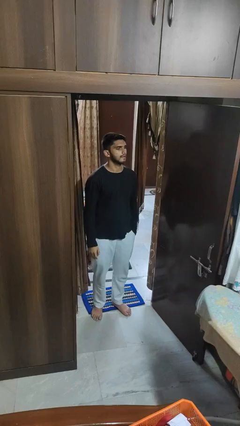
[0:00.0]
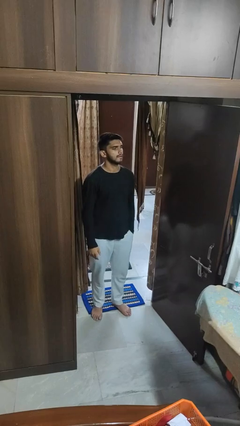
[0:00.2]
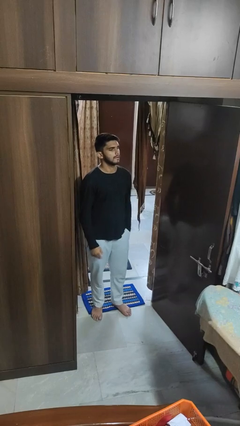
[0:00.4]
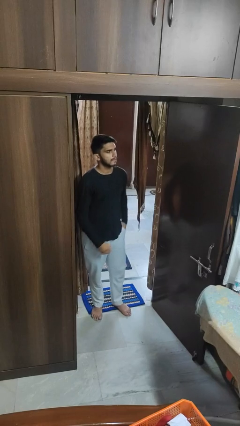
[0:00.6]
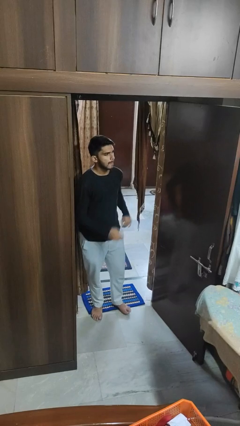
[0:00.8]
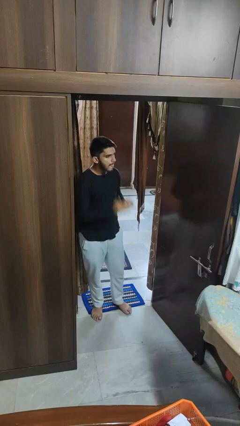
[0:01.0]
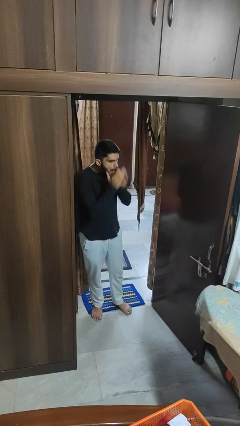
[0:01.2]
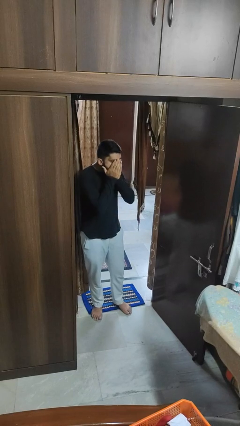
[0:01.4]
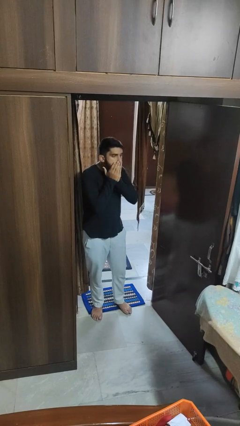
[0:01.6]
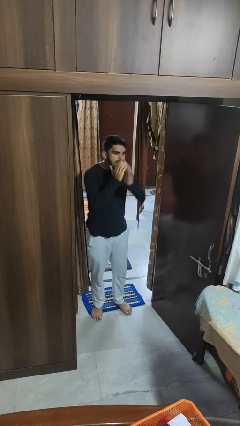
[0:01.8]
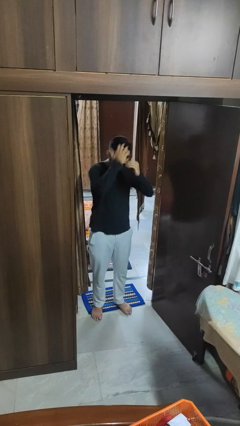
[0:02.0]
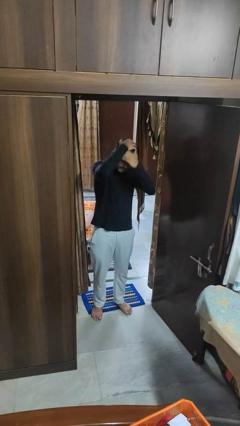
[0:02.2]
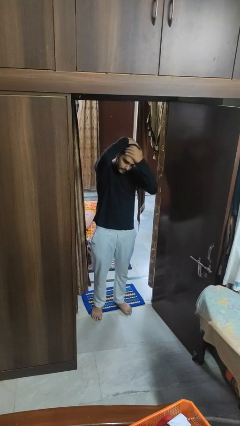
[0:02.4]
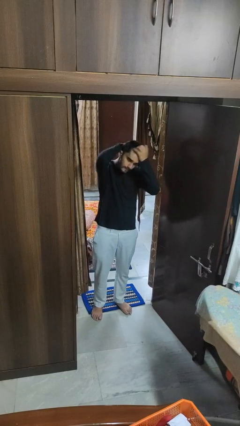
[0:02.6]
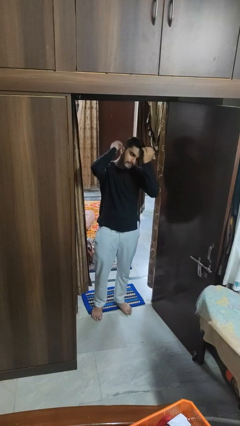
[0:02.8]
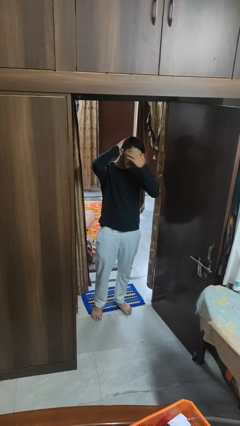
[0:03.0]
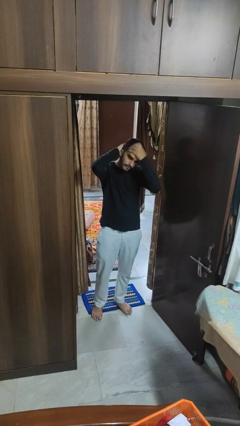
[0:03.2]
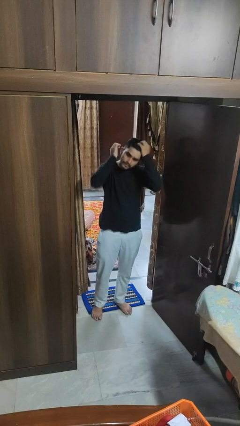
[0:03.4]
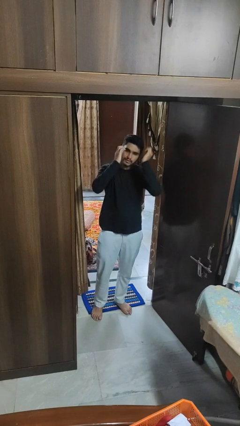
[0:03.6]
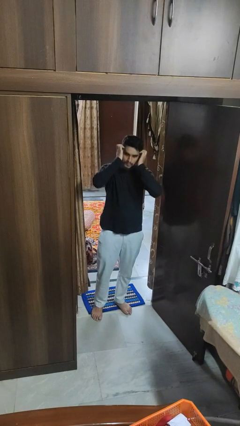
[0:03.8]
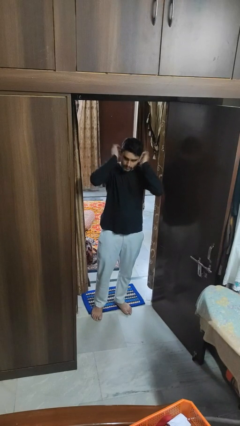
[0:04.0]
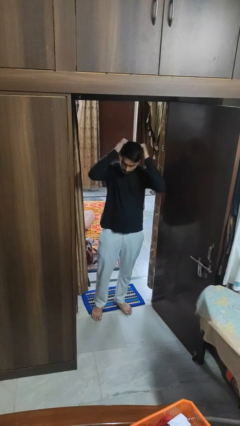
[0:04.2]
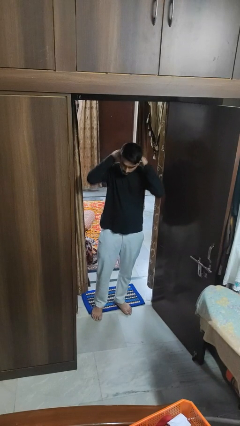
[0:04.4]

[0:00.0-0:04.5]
person strokes hair

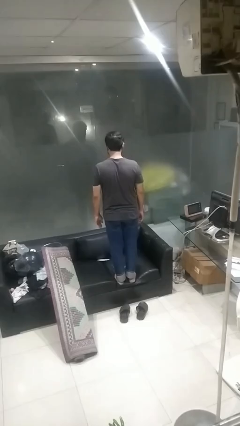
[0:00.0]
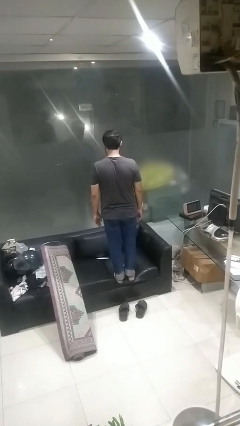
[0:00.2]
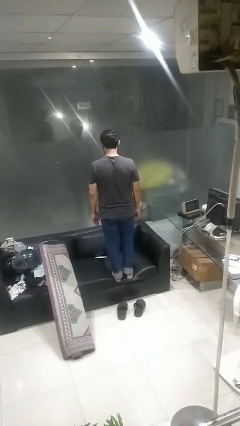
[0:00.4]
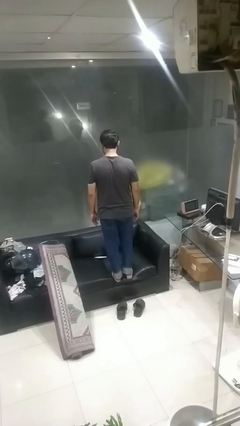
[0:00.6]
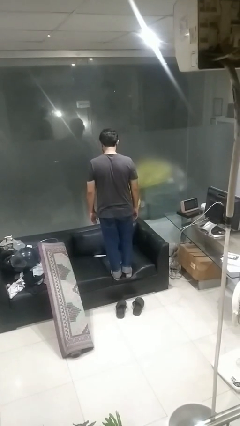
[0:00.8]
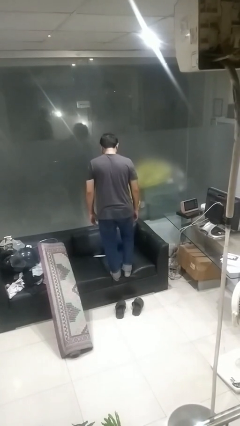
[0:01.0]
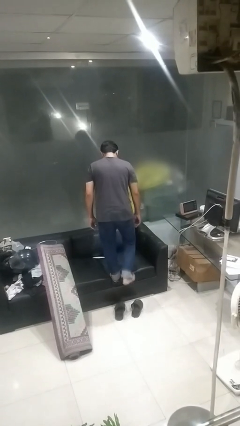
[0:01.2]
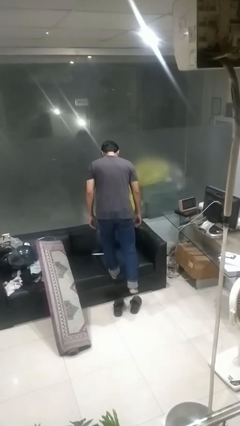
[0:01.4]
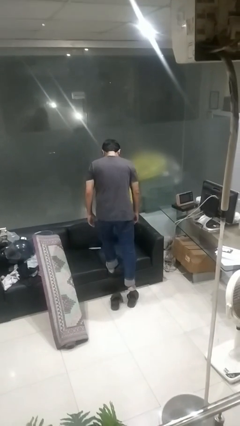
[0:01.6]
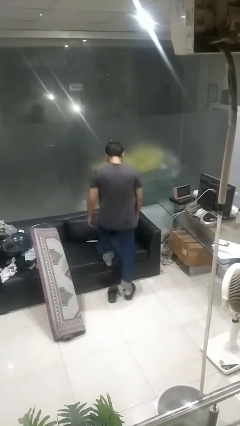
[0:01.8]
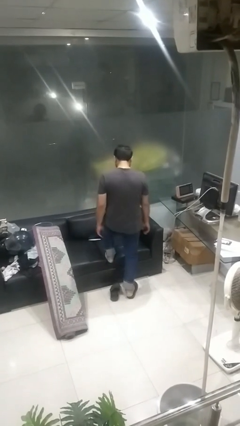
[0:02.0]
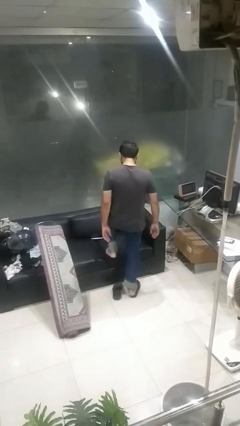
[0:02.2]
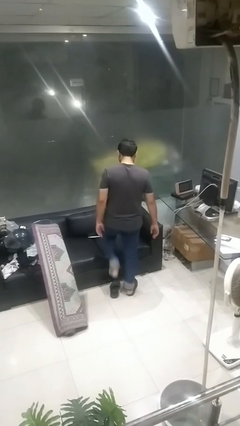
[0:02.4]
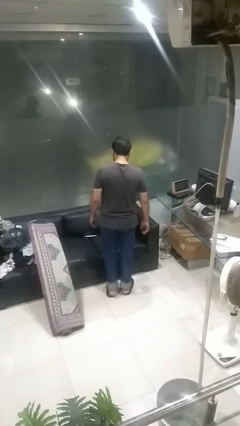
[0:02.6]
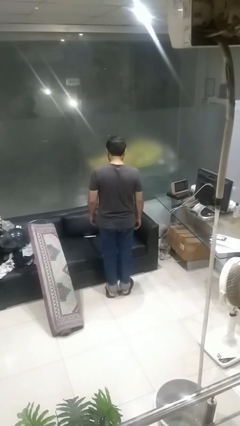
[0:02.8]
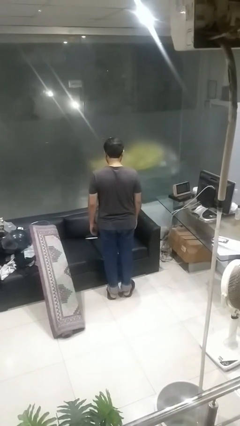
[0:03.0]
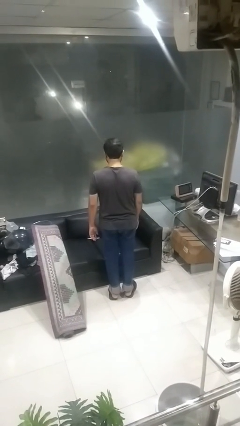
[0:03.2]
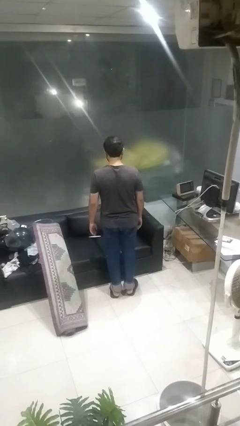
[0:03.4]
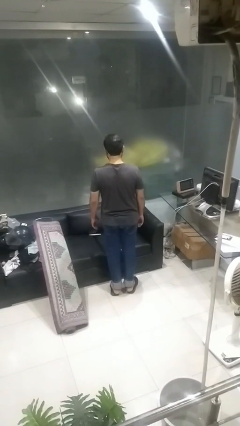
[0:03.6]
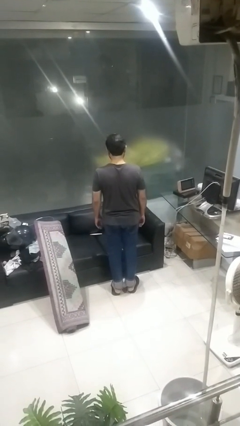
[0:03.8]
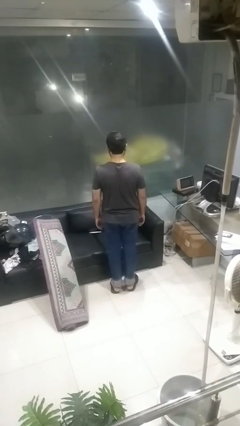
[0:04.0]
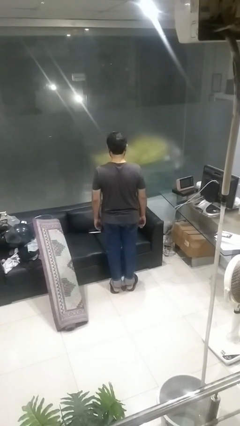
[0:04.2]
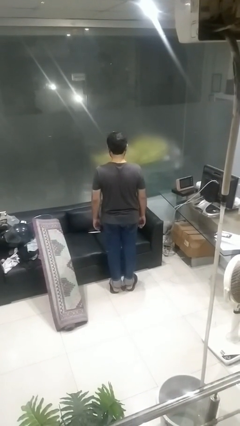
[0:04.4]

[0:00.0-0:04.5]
person climbs off couch

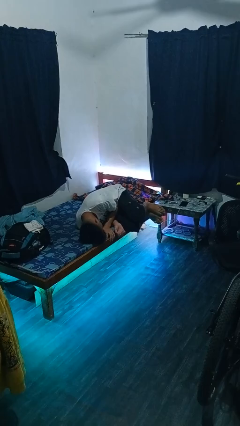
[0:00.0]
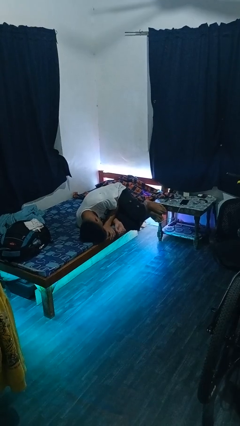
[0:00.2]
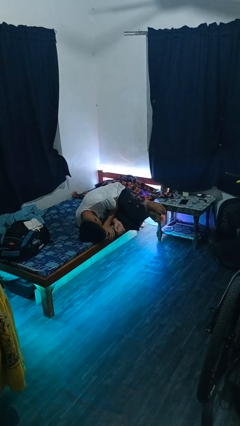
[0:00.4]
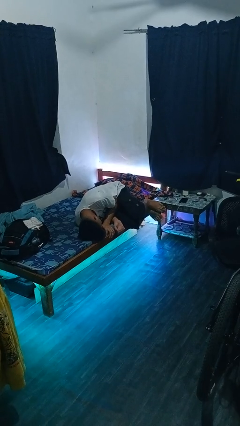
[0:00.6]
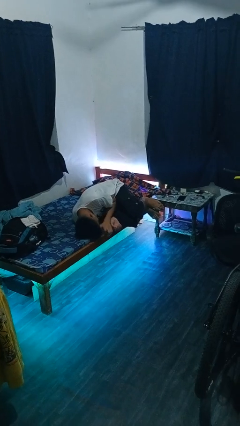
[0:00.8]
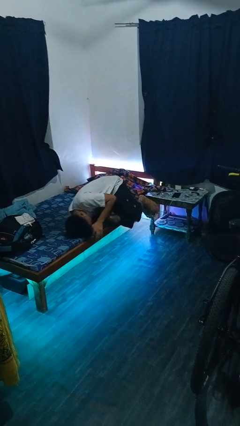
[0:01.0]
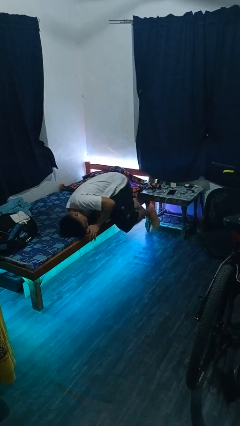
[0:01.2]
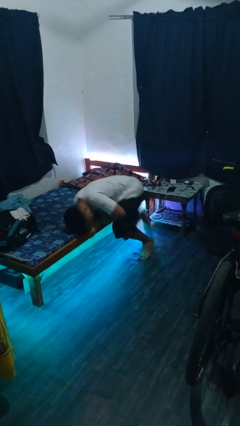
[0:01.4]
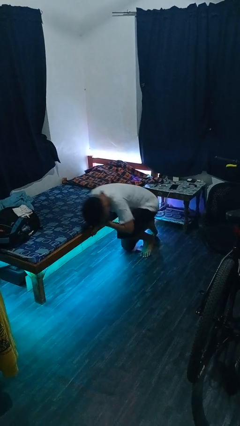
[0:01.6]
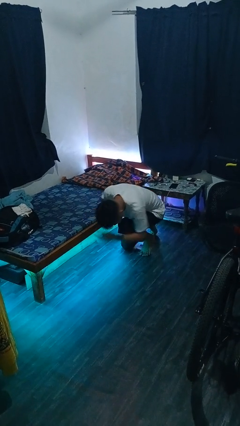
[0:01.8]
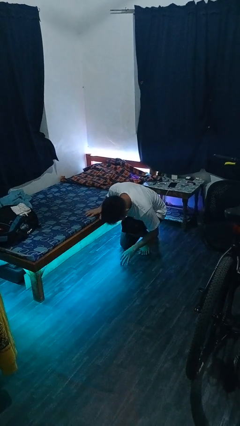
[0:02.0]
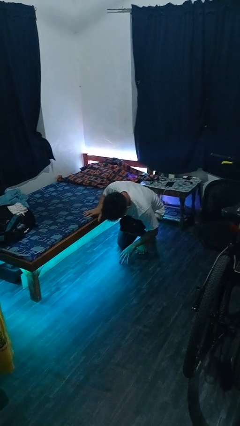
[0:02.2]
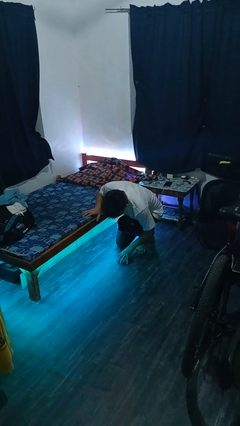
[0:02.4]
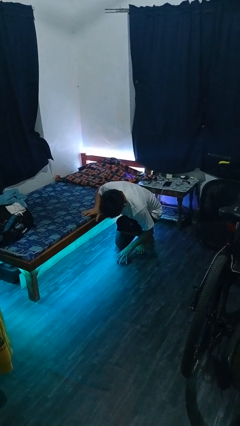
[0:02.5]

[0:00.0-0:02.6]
person falls from bed

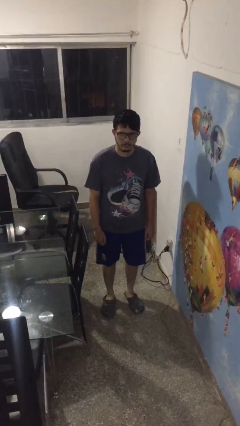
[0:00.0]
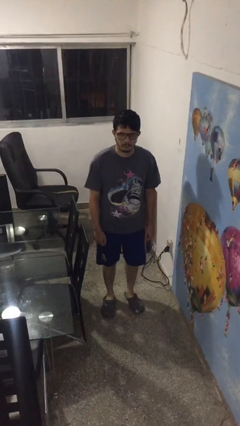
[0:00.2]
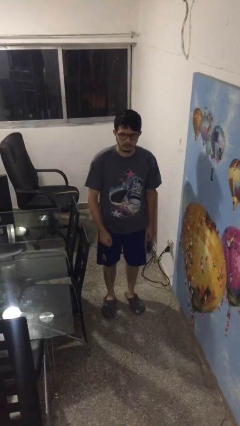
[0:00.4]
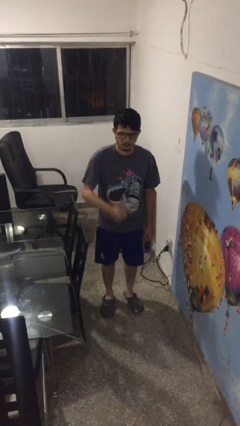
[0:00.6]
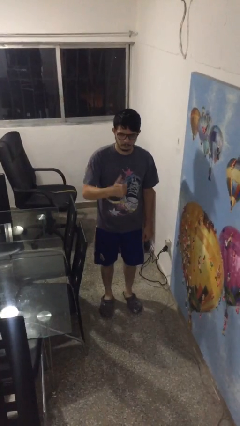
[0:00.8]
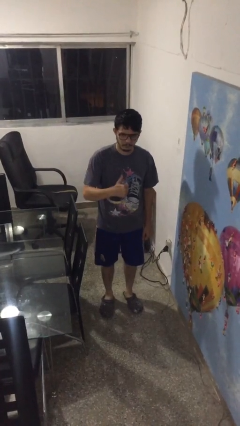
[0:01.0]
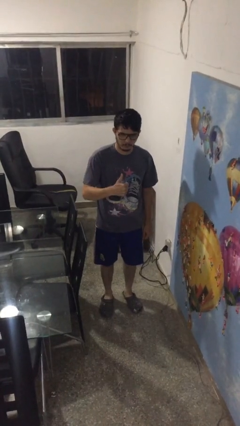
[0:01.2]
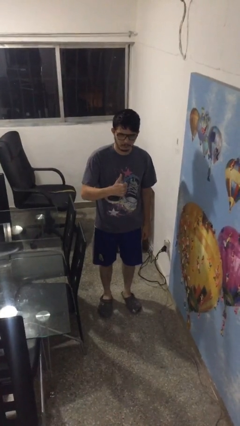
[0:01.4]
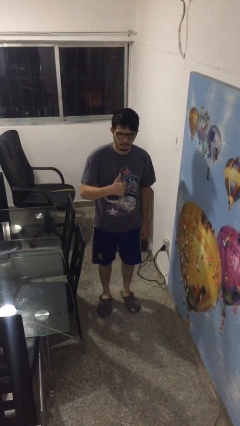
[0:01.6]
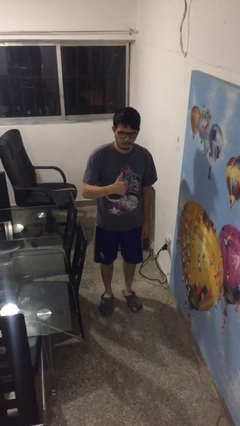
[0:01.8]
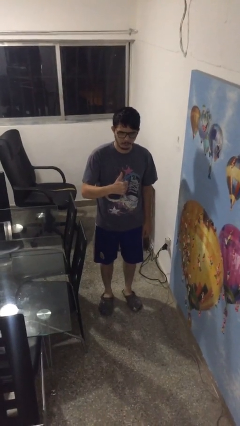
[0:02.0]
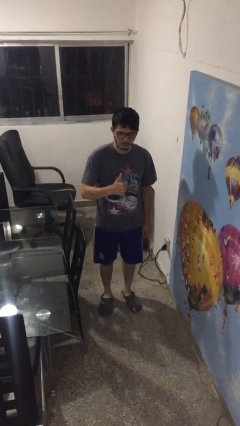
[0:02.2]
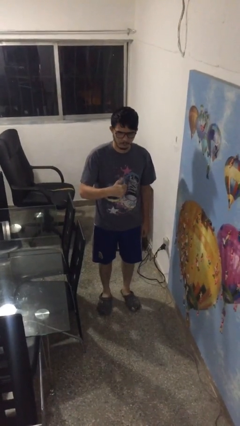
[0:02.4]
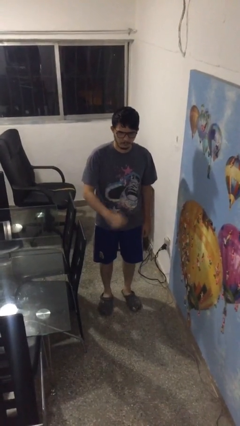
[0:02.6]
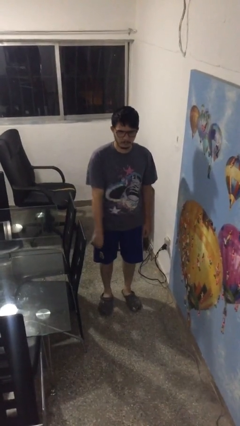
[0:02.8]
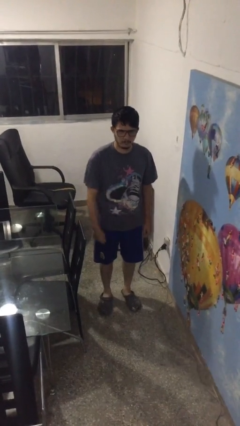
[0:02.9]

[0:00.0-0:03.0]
person gestures thumbs up

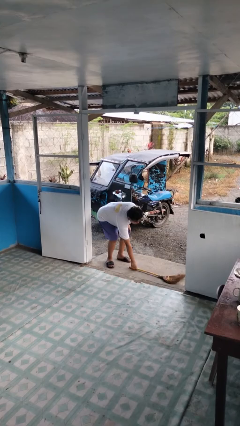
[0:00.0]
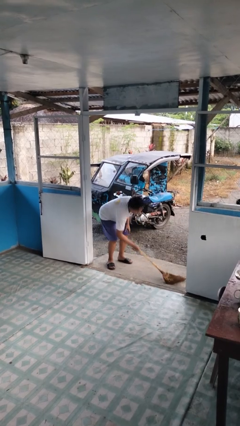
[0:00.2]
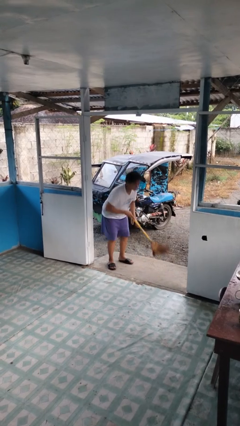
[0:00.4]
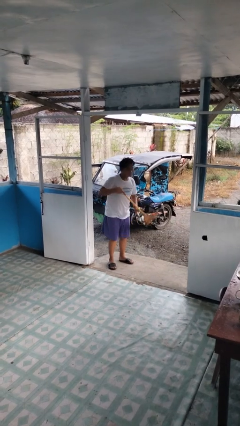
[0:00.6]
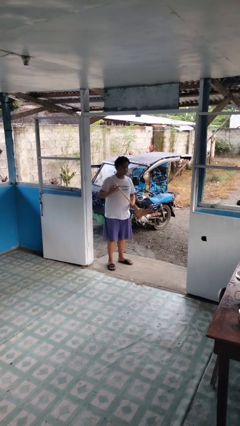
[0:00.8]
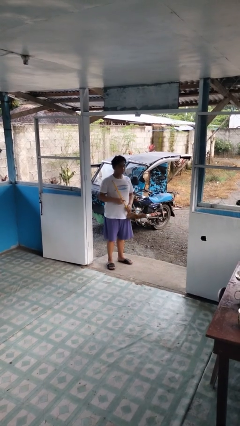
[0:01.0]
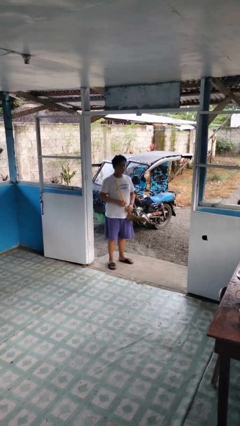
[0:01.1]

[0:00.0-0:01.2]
person picks up object from floor

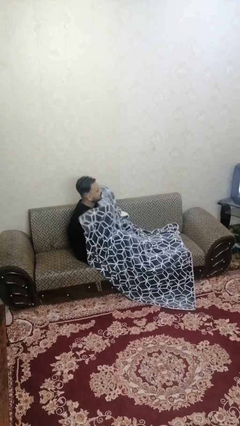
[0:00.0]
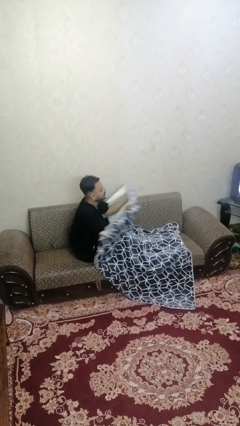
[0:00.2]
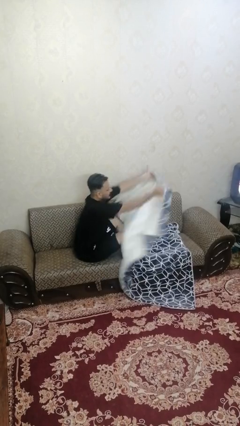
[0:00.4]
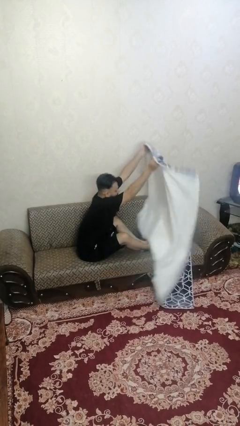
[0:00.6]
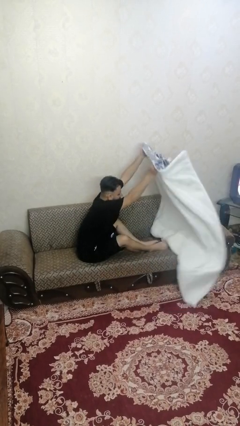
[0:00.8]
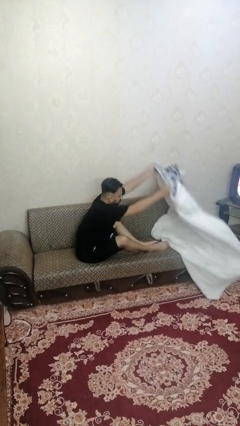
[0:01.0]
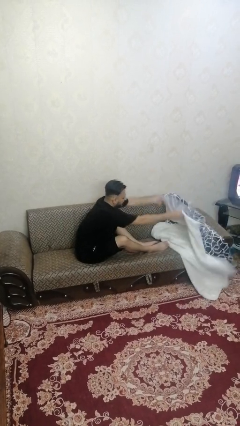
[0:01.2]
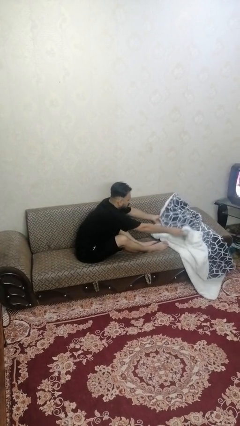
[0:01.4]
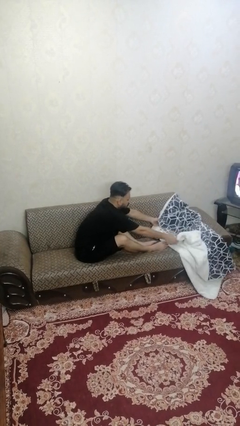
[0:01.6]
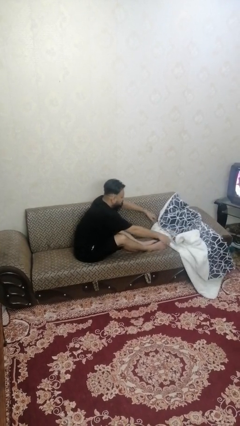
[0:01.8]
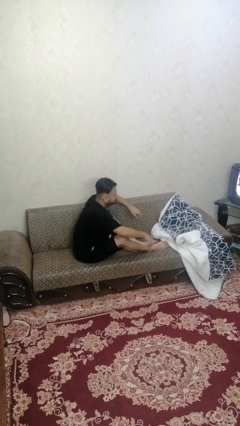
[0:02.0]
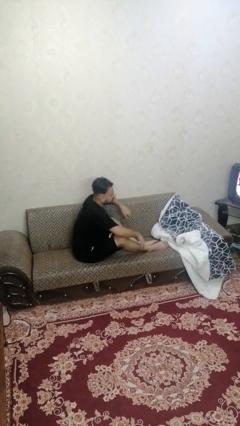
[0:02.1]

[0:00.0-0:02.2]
person uncovers with blanket
